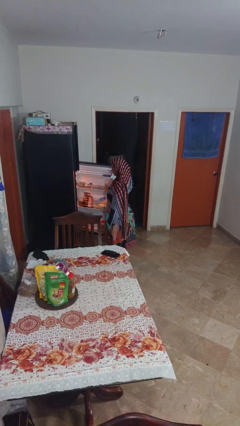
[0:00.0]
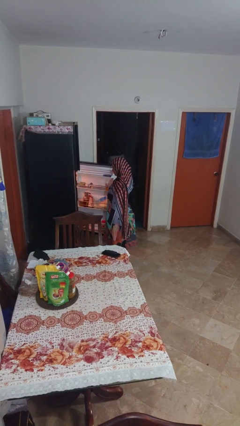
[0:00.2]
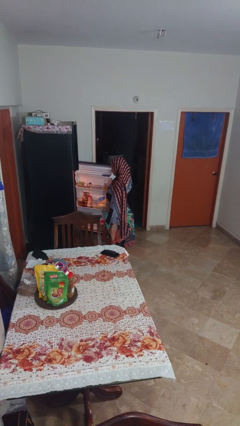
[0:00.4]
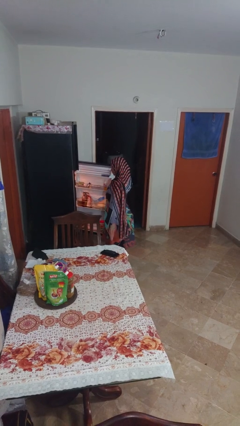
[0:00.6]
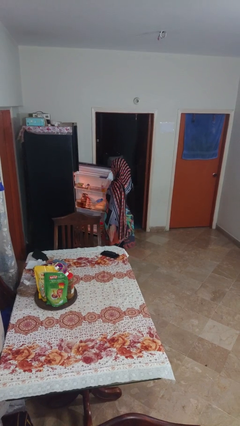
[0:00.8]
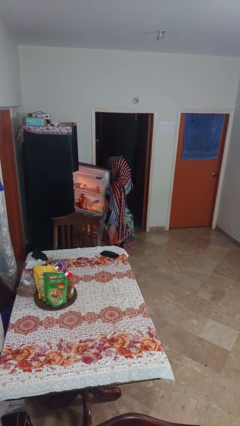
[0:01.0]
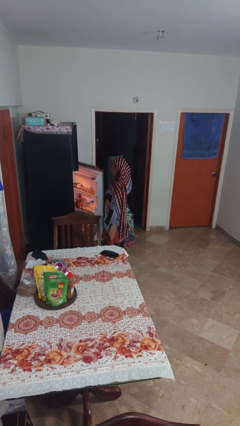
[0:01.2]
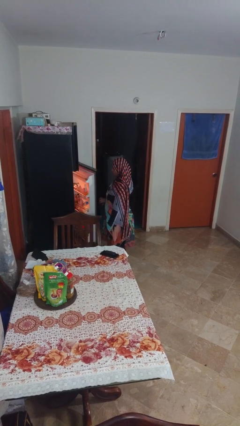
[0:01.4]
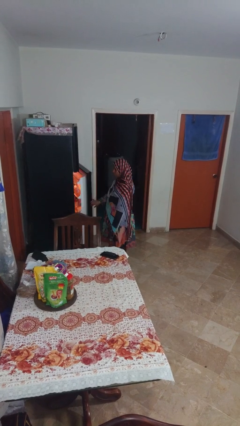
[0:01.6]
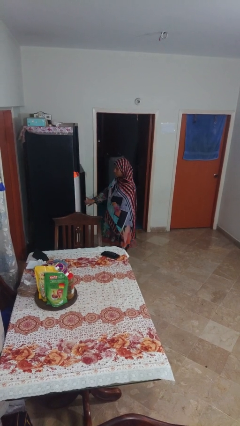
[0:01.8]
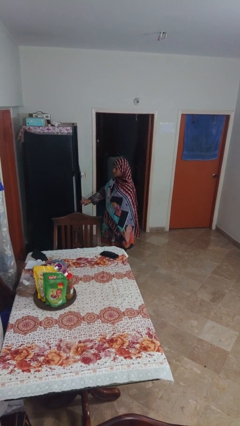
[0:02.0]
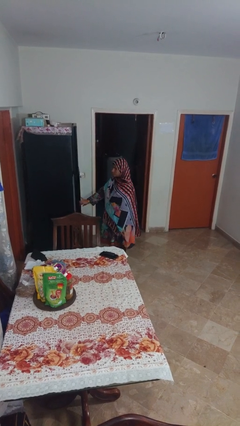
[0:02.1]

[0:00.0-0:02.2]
person closes refrigerator

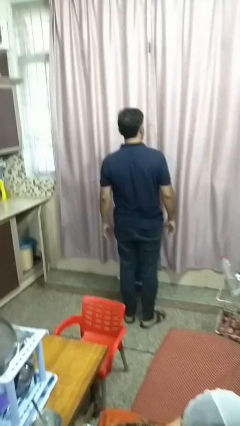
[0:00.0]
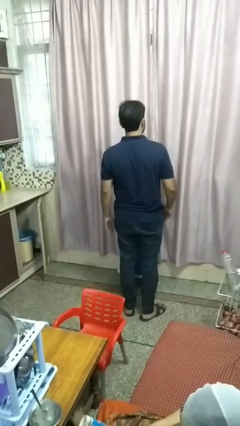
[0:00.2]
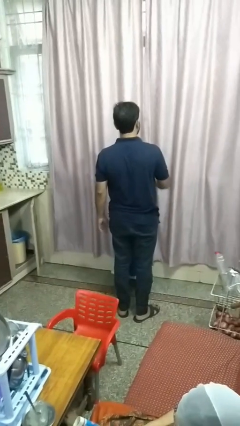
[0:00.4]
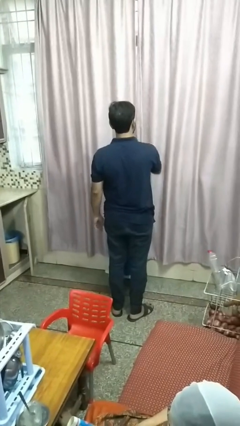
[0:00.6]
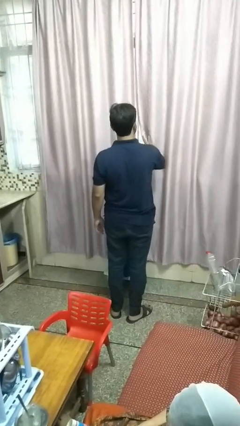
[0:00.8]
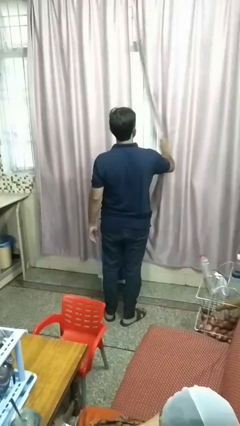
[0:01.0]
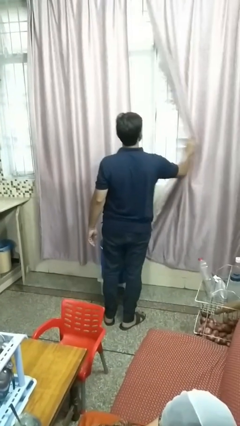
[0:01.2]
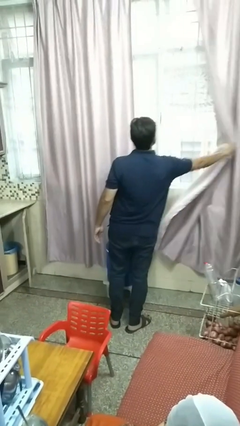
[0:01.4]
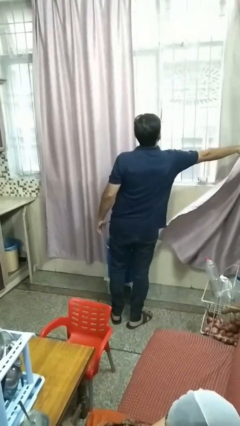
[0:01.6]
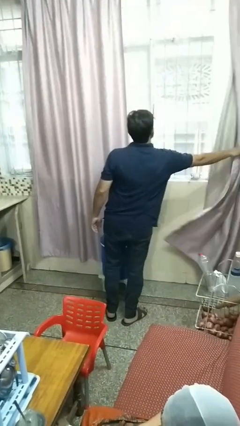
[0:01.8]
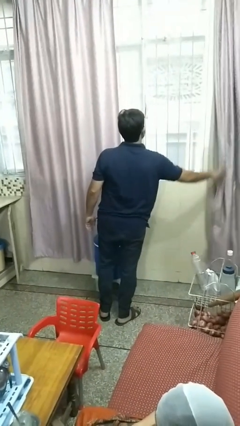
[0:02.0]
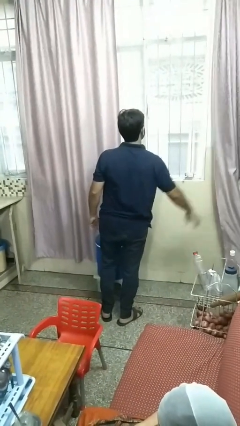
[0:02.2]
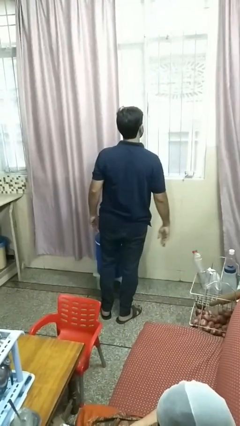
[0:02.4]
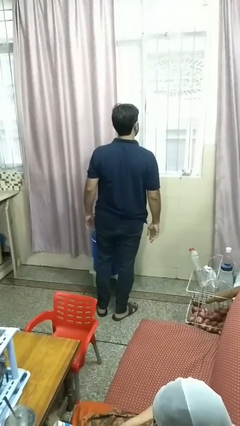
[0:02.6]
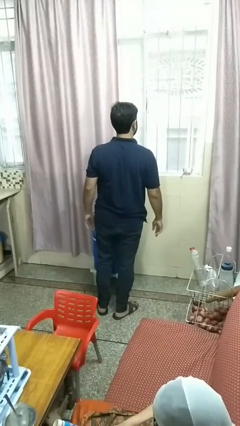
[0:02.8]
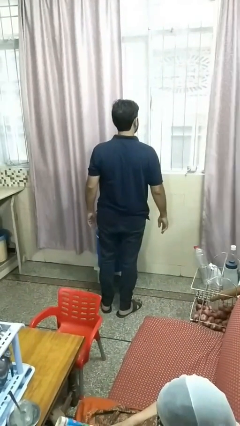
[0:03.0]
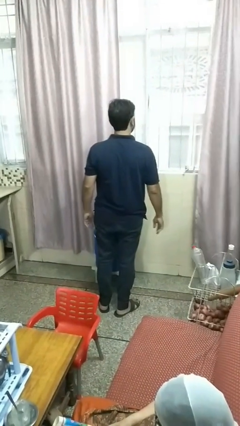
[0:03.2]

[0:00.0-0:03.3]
person opens curtains

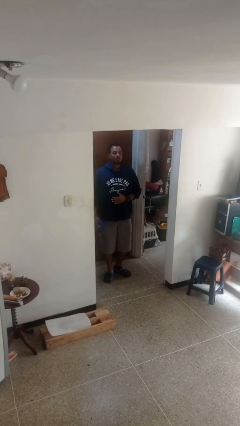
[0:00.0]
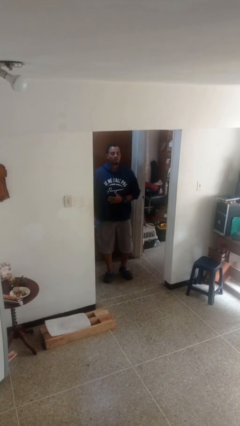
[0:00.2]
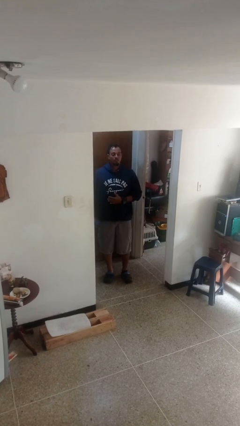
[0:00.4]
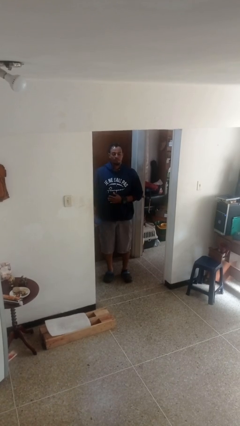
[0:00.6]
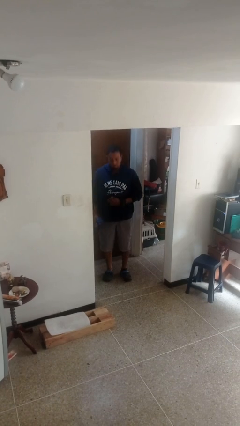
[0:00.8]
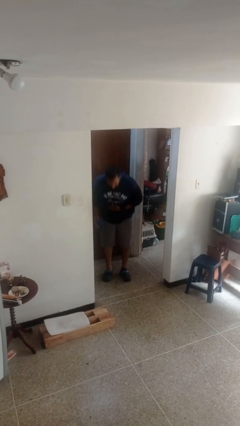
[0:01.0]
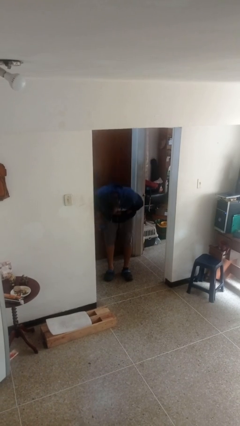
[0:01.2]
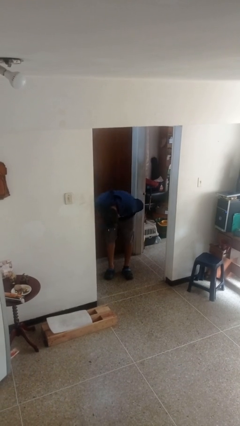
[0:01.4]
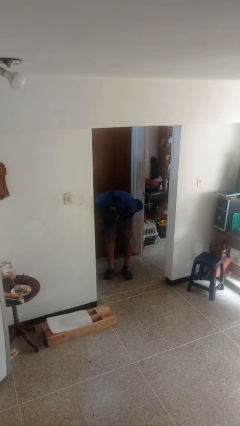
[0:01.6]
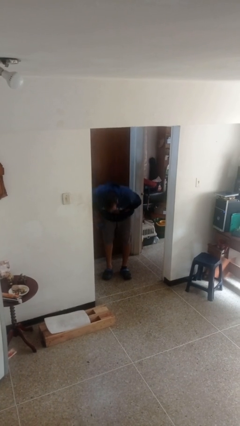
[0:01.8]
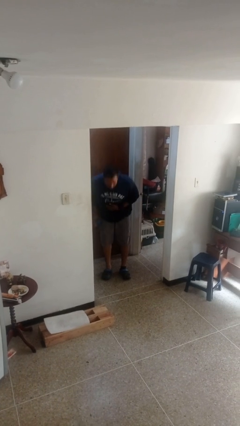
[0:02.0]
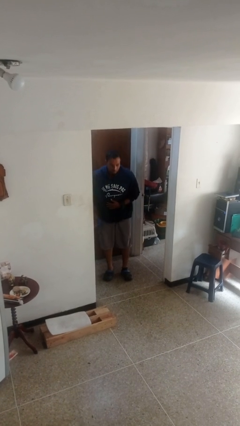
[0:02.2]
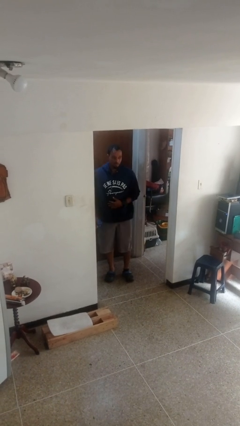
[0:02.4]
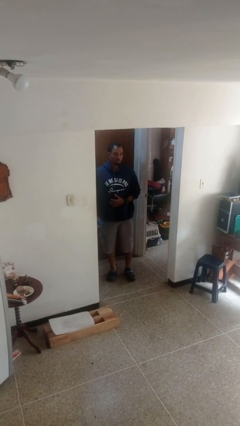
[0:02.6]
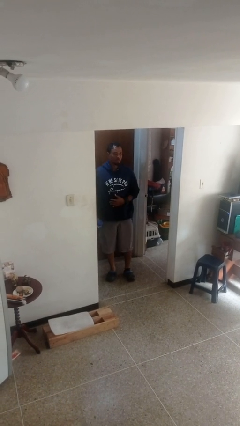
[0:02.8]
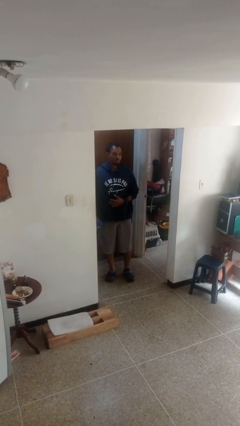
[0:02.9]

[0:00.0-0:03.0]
person bows

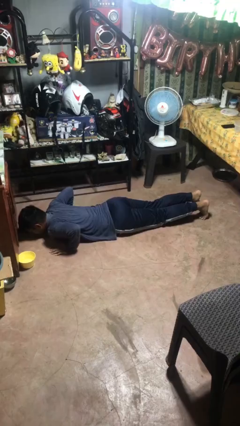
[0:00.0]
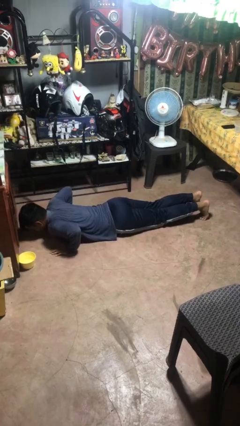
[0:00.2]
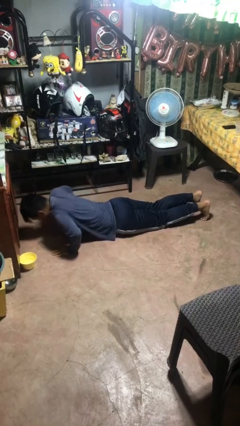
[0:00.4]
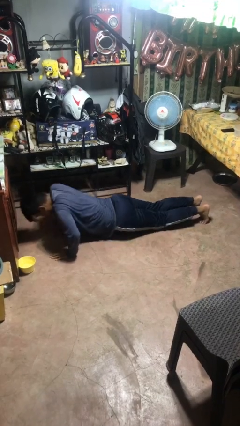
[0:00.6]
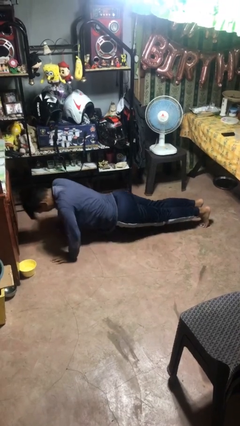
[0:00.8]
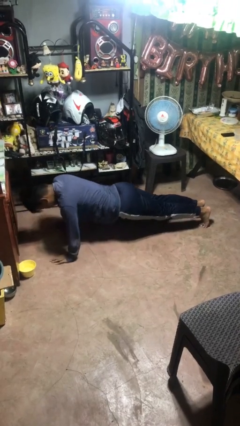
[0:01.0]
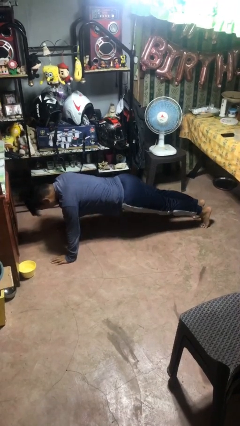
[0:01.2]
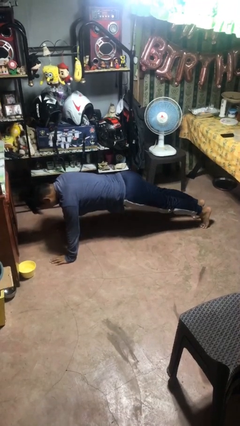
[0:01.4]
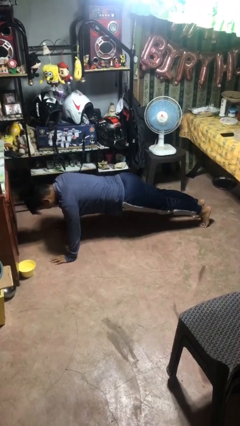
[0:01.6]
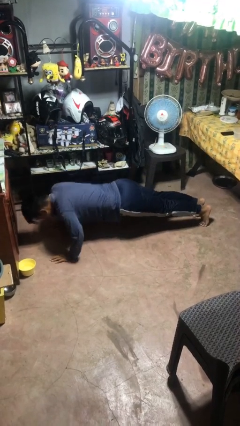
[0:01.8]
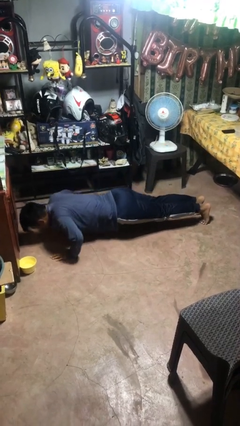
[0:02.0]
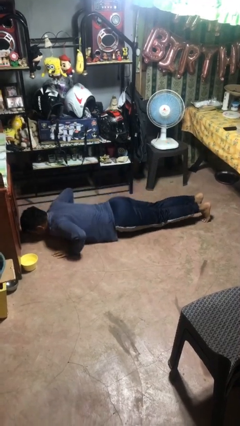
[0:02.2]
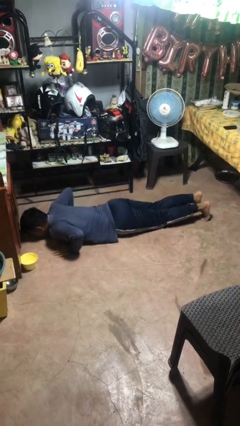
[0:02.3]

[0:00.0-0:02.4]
person exercises with pushup

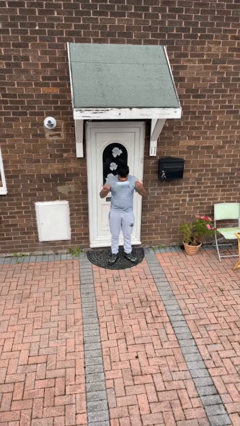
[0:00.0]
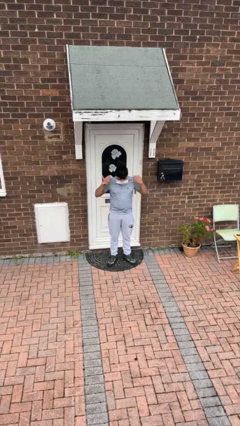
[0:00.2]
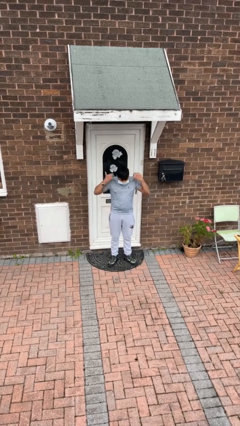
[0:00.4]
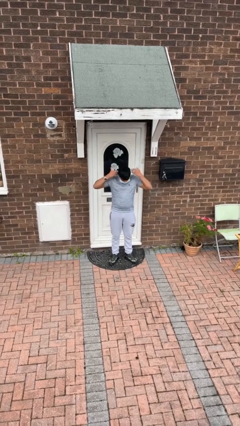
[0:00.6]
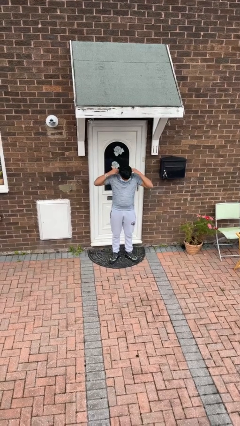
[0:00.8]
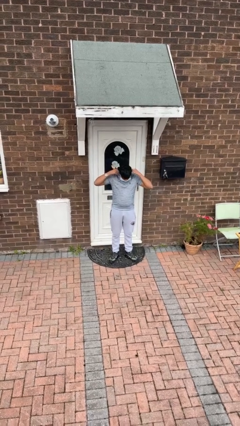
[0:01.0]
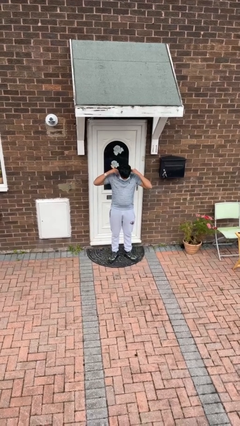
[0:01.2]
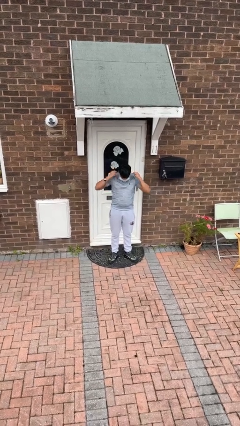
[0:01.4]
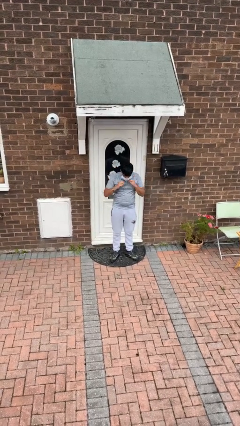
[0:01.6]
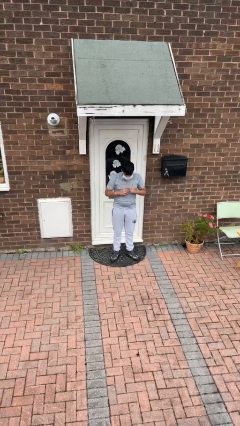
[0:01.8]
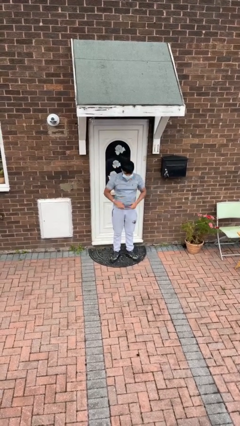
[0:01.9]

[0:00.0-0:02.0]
person puts on facemask

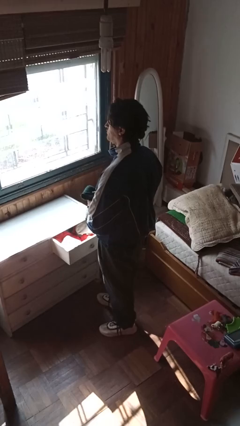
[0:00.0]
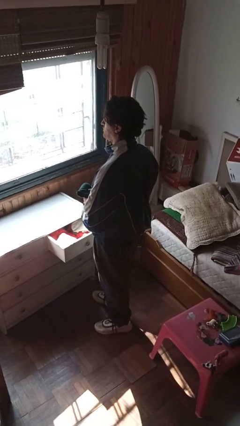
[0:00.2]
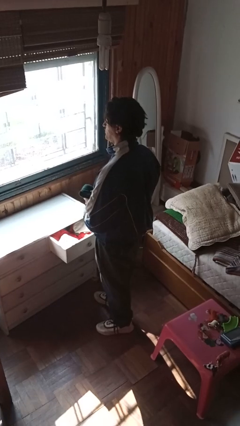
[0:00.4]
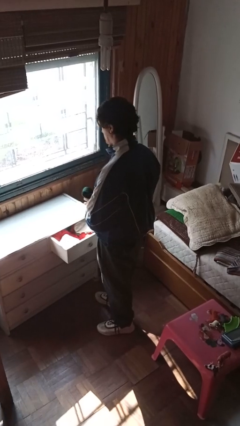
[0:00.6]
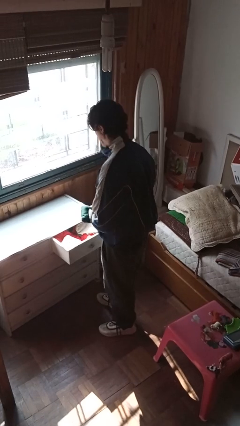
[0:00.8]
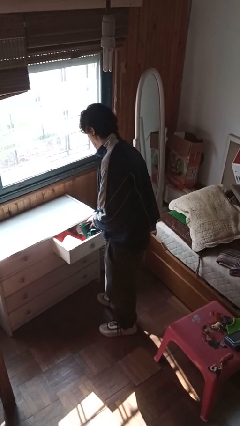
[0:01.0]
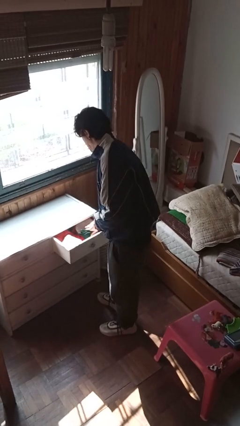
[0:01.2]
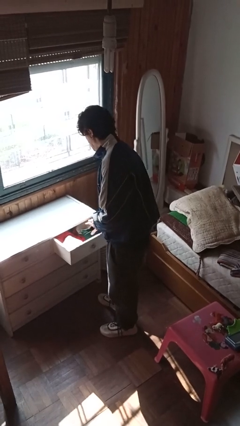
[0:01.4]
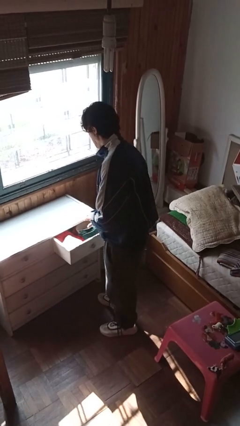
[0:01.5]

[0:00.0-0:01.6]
person puts clothes into dresser
